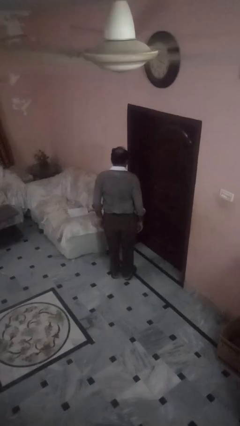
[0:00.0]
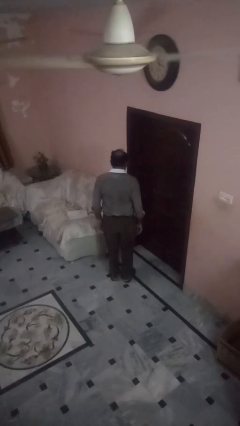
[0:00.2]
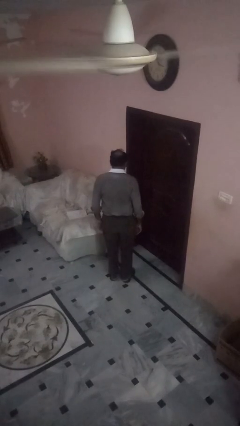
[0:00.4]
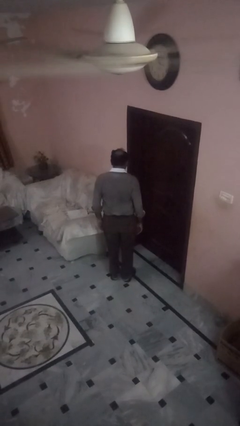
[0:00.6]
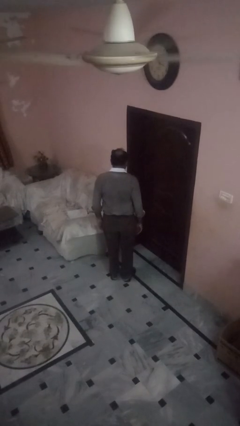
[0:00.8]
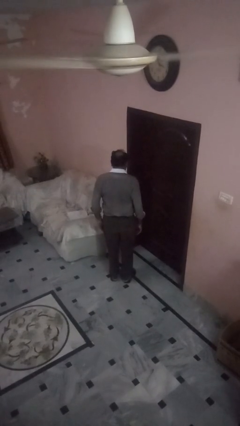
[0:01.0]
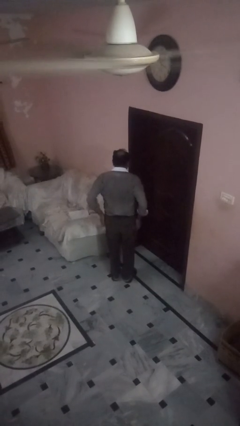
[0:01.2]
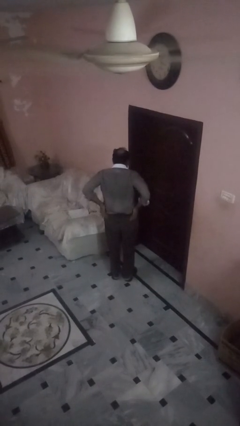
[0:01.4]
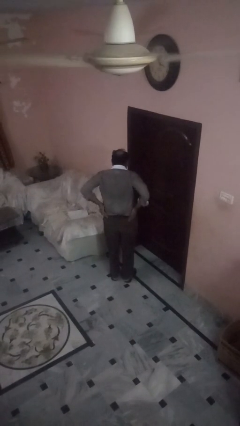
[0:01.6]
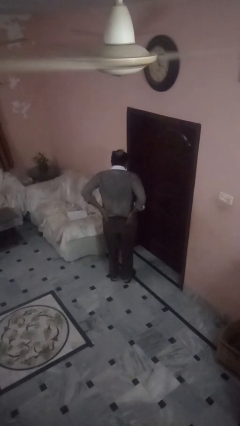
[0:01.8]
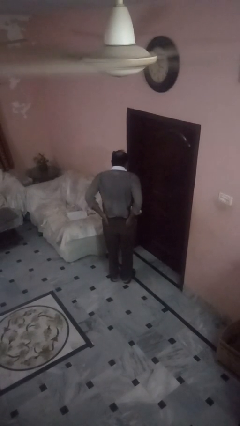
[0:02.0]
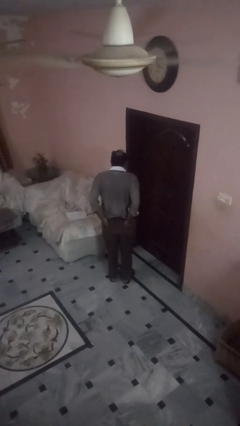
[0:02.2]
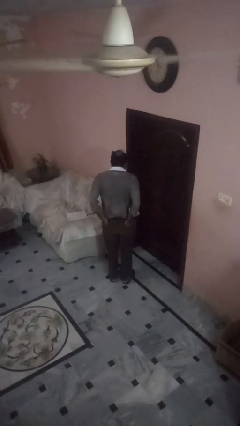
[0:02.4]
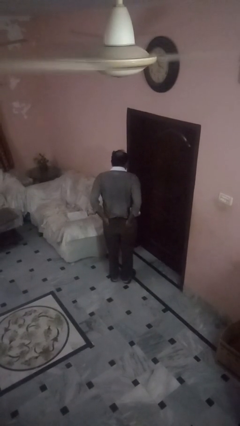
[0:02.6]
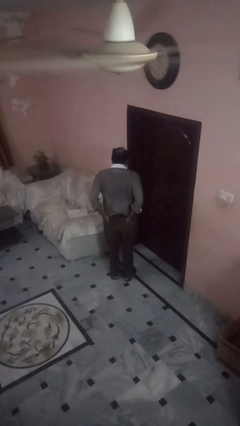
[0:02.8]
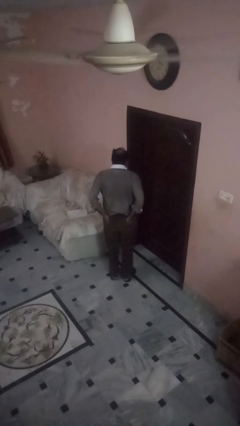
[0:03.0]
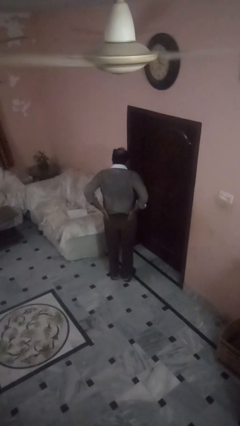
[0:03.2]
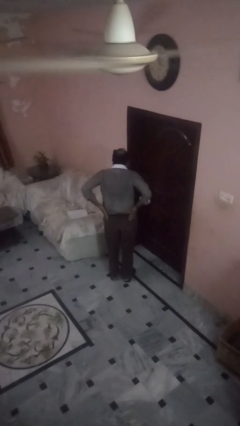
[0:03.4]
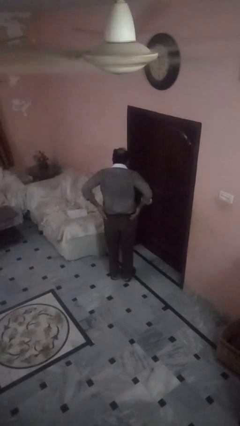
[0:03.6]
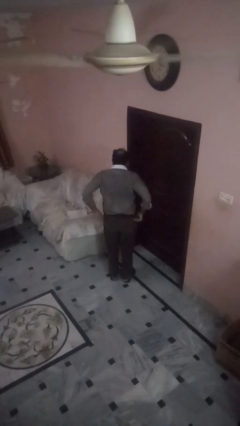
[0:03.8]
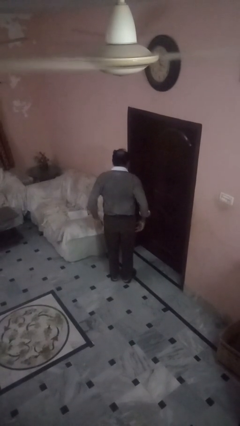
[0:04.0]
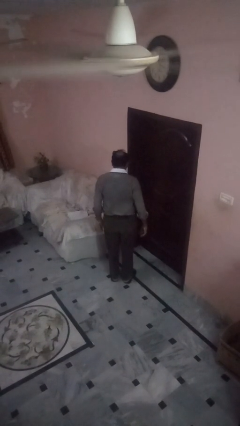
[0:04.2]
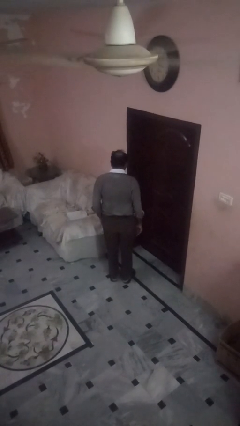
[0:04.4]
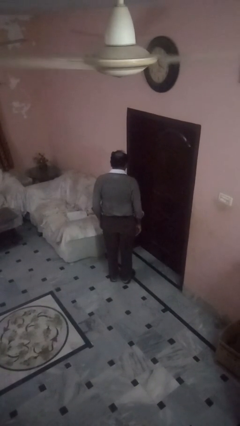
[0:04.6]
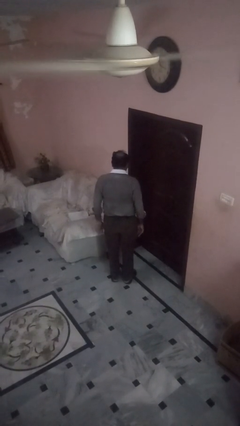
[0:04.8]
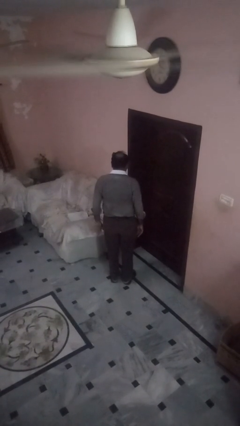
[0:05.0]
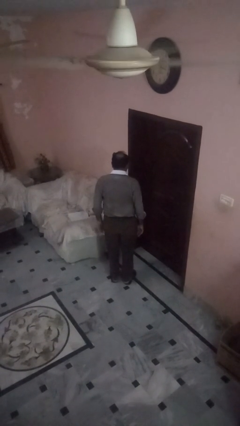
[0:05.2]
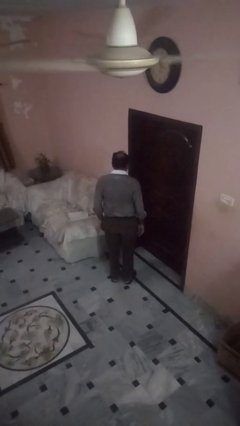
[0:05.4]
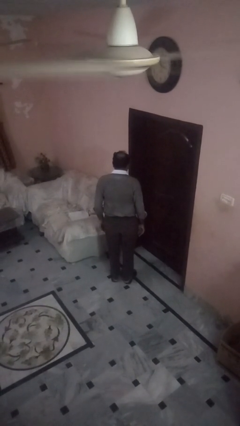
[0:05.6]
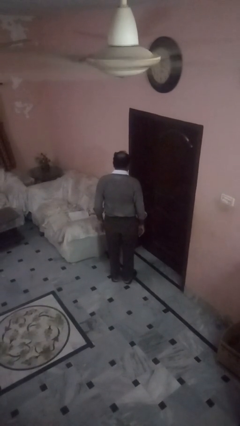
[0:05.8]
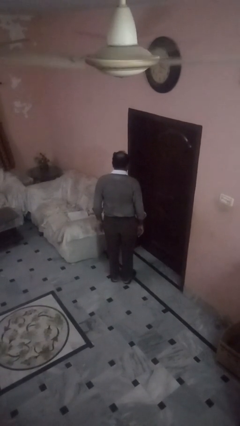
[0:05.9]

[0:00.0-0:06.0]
person puts hands in back pockets

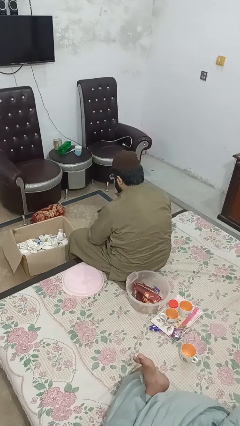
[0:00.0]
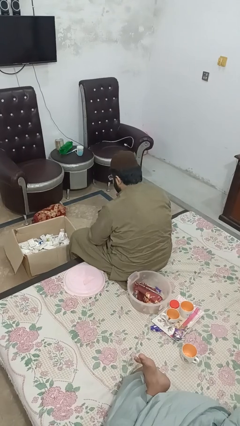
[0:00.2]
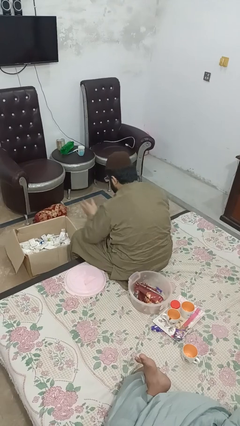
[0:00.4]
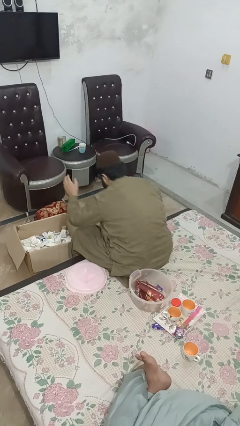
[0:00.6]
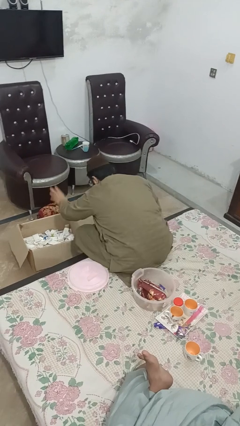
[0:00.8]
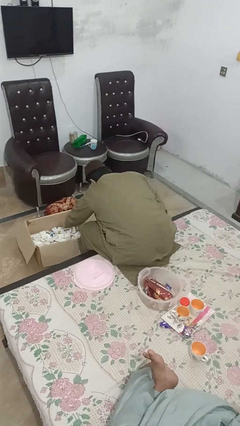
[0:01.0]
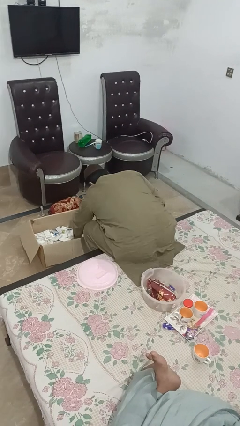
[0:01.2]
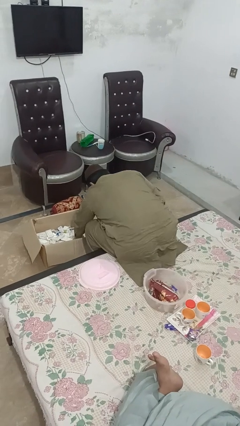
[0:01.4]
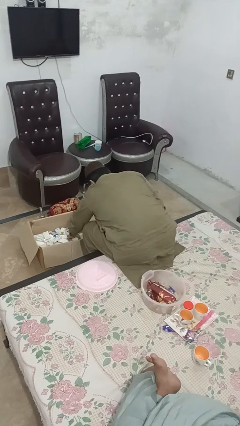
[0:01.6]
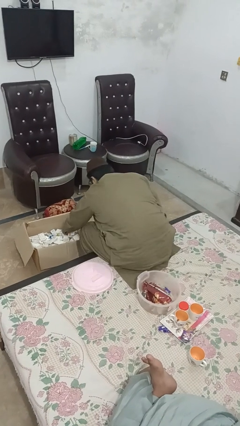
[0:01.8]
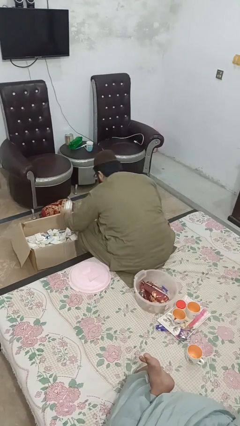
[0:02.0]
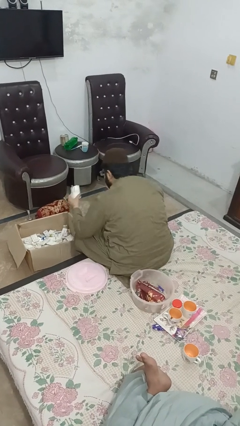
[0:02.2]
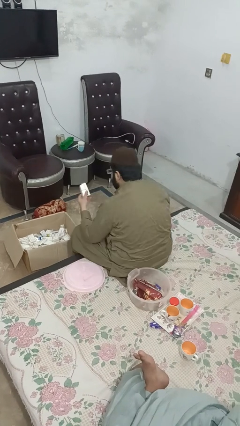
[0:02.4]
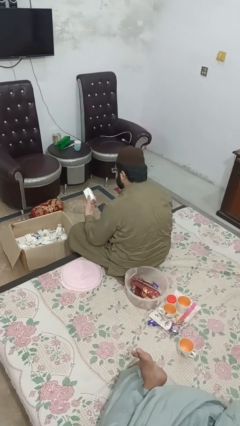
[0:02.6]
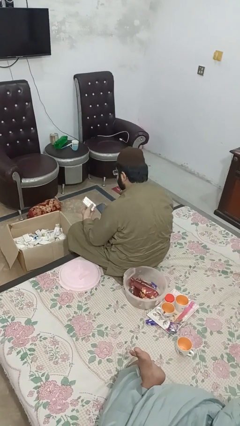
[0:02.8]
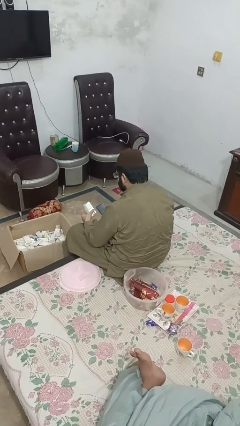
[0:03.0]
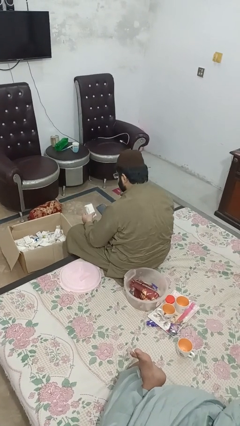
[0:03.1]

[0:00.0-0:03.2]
person takes object from box

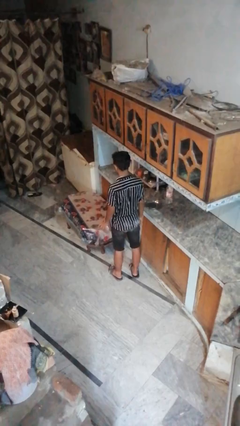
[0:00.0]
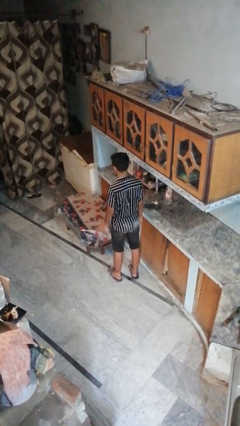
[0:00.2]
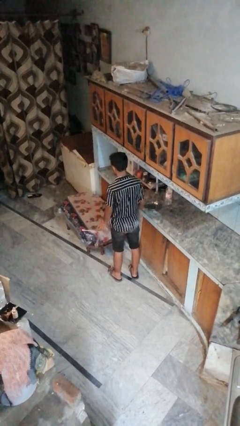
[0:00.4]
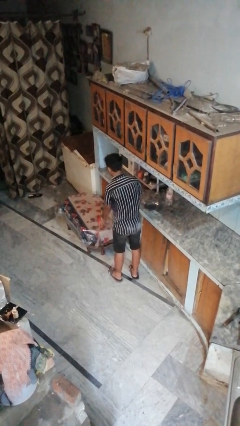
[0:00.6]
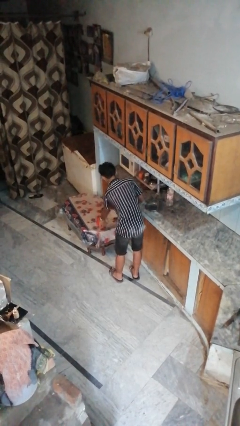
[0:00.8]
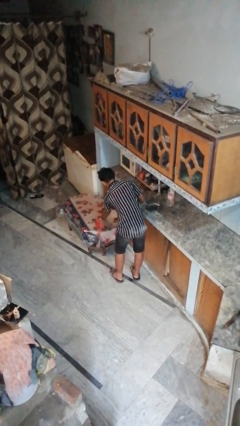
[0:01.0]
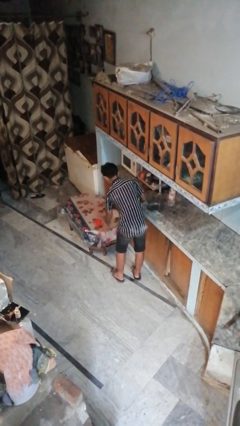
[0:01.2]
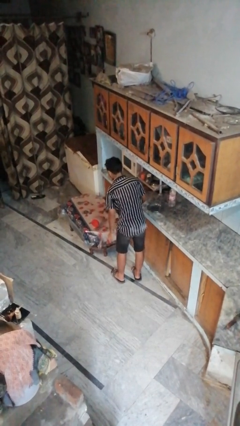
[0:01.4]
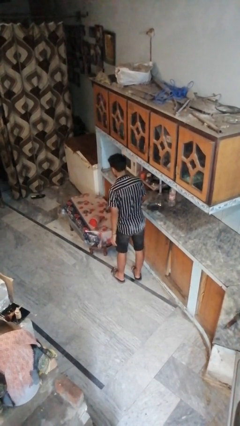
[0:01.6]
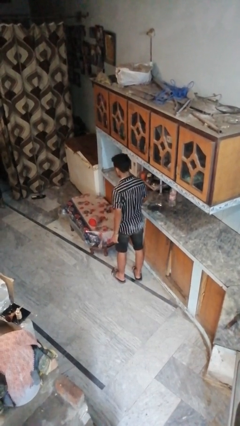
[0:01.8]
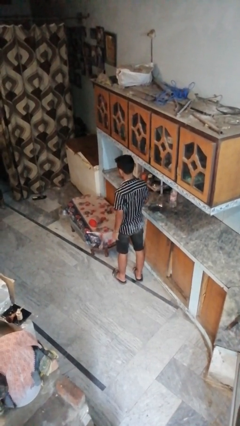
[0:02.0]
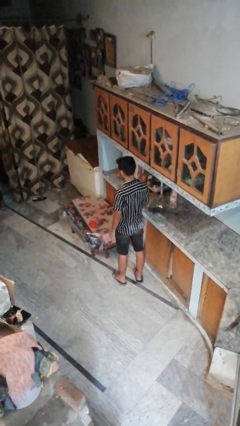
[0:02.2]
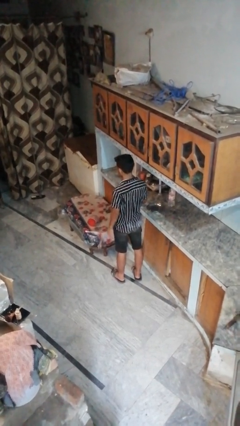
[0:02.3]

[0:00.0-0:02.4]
person throws object on table

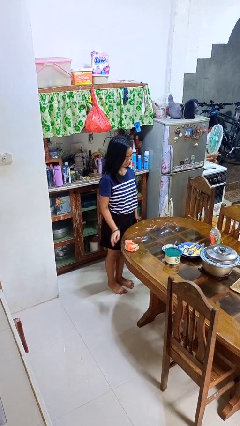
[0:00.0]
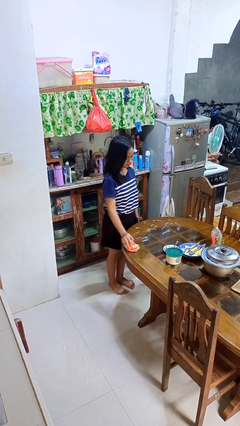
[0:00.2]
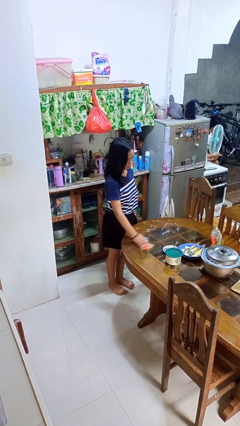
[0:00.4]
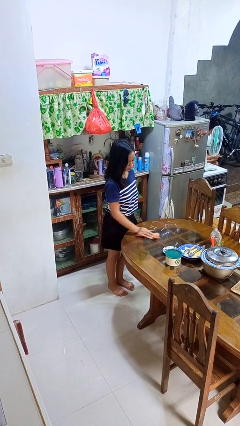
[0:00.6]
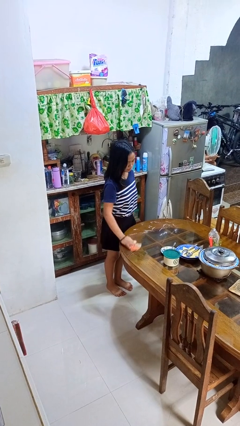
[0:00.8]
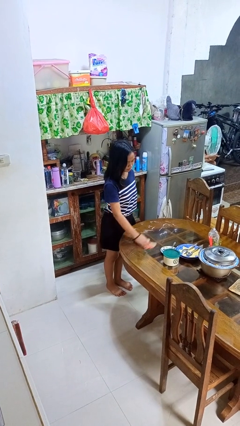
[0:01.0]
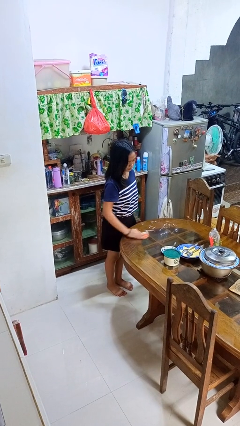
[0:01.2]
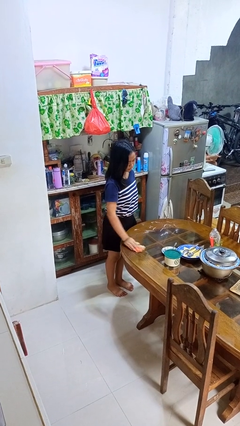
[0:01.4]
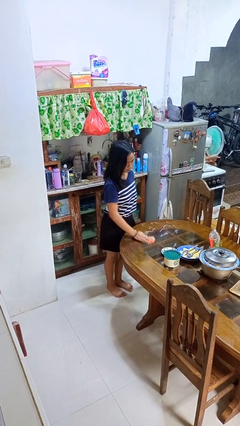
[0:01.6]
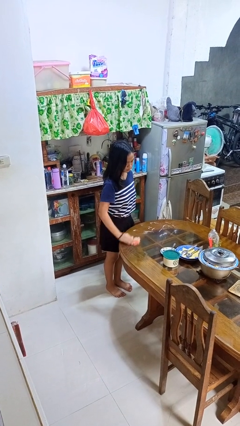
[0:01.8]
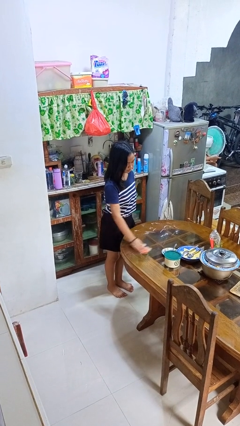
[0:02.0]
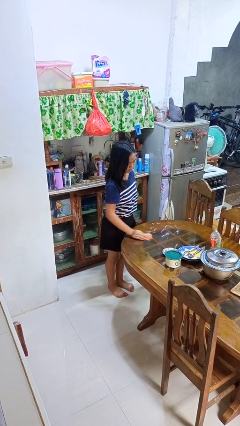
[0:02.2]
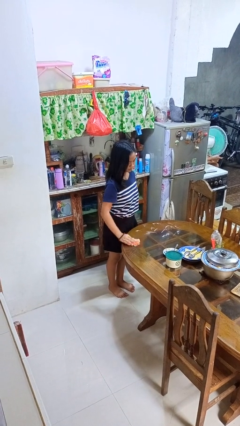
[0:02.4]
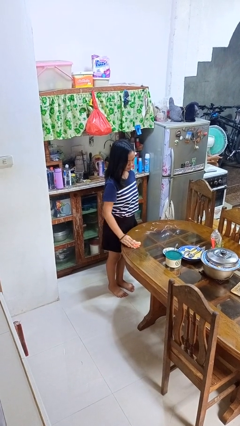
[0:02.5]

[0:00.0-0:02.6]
person cleans table with rag

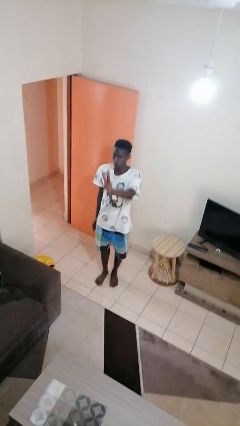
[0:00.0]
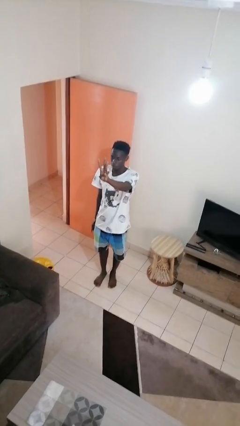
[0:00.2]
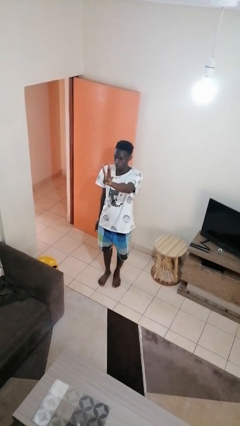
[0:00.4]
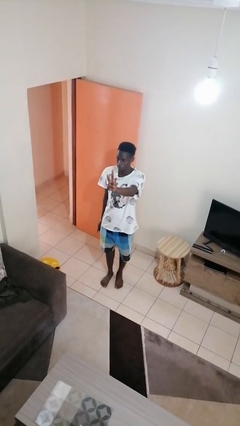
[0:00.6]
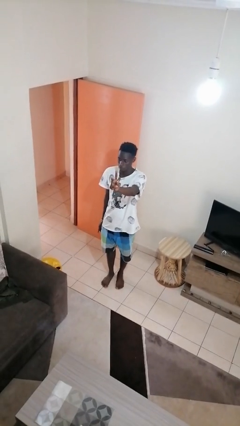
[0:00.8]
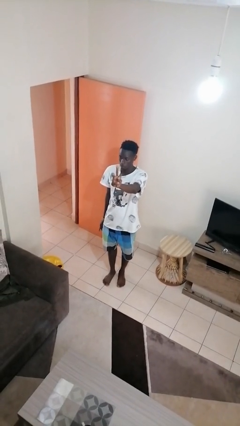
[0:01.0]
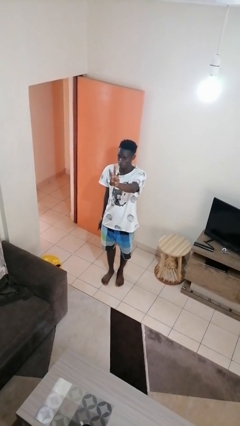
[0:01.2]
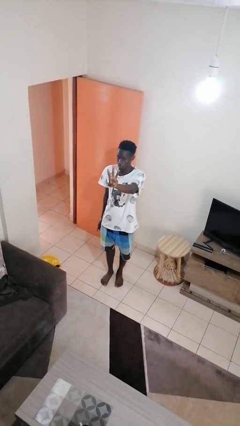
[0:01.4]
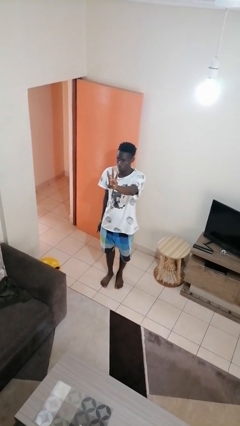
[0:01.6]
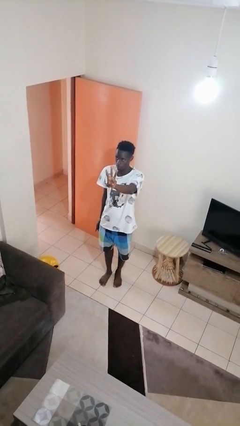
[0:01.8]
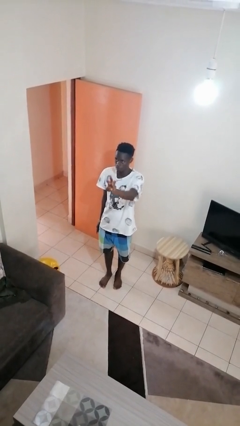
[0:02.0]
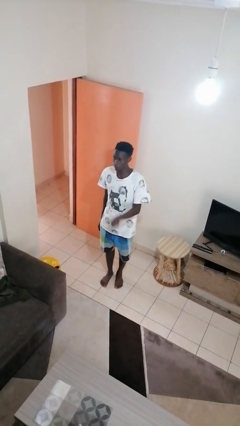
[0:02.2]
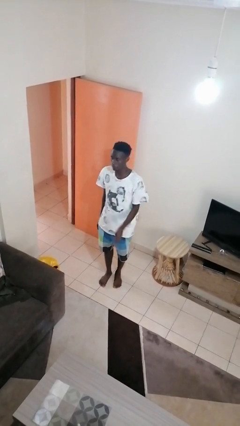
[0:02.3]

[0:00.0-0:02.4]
person gestures number three

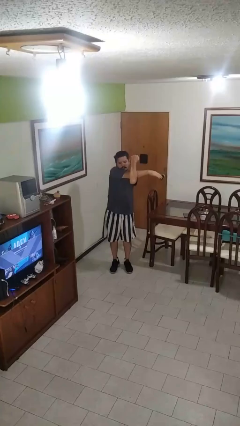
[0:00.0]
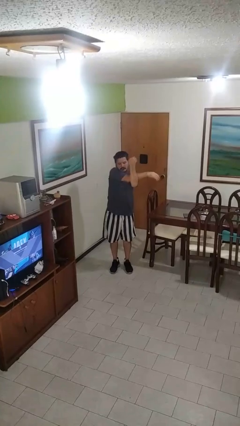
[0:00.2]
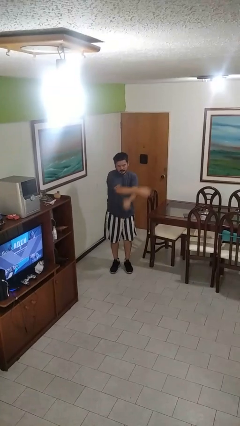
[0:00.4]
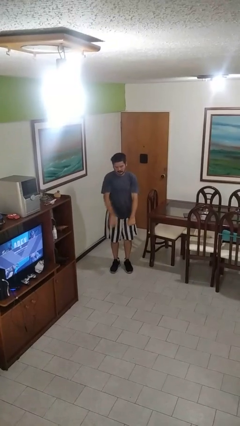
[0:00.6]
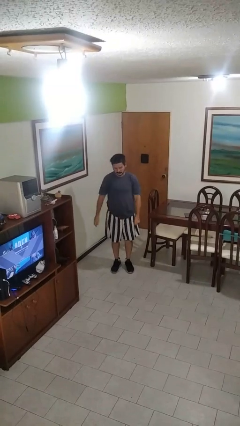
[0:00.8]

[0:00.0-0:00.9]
person stretches arms to side
